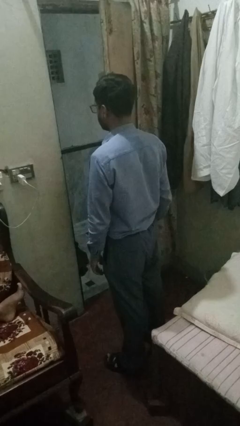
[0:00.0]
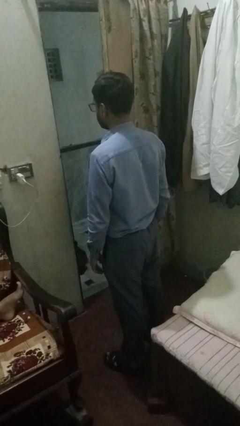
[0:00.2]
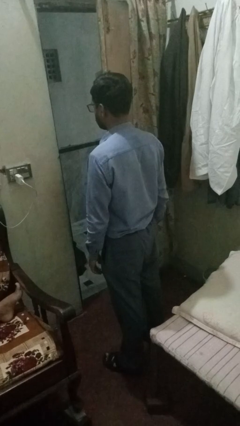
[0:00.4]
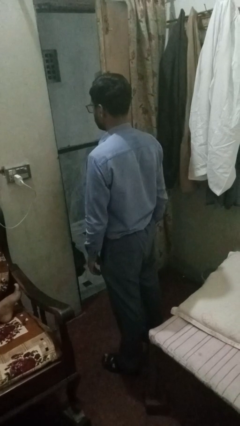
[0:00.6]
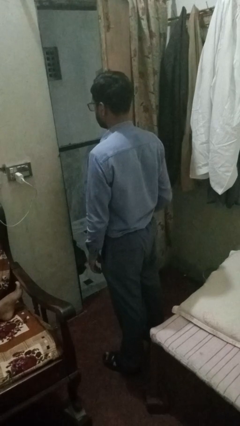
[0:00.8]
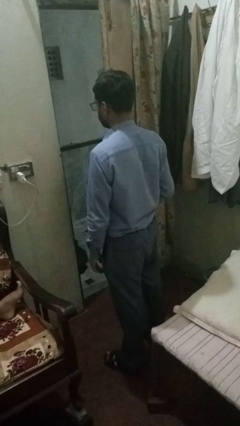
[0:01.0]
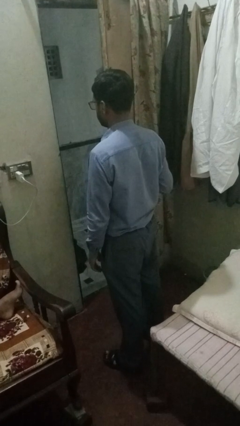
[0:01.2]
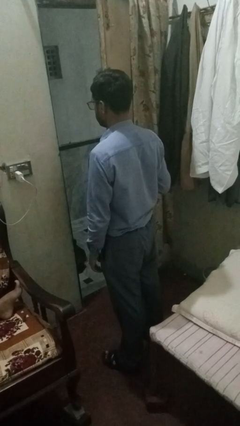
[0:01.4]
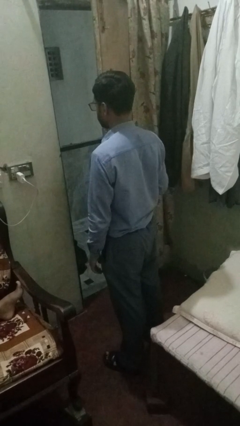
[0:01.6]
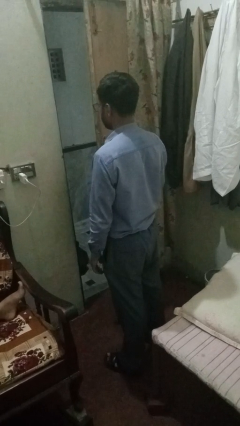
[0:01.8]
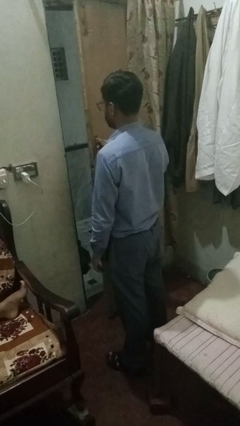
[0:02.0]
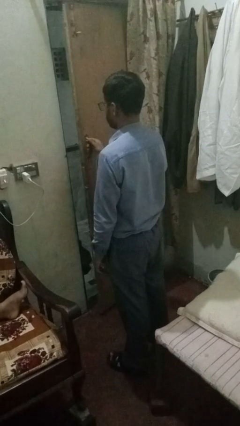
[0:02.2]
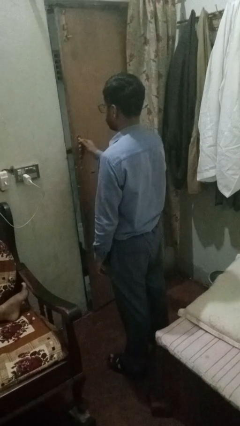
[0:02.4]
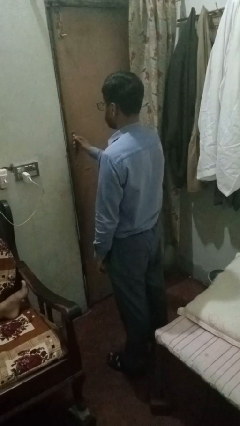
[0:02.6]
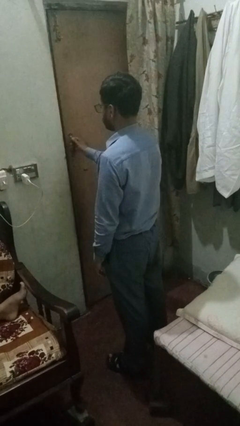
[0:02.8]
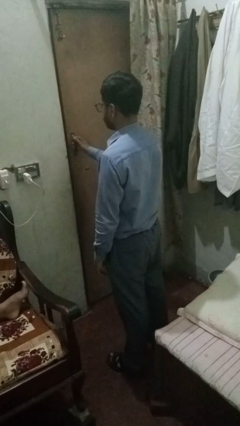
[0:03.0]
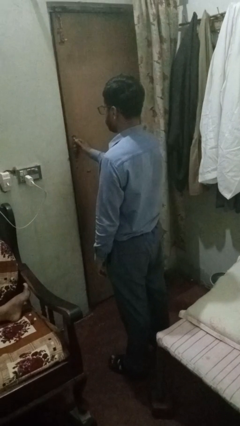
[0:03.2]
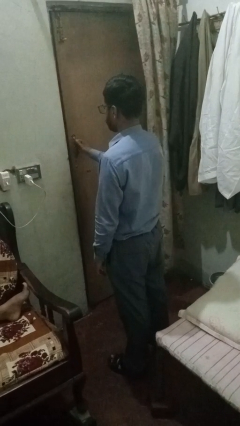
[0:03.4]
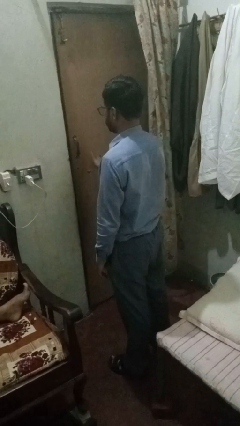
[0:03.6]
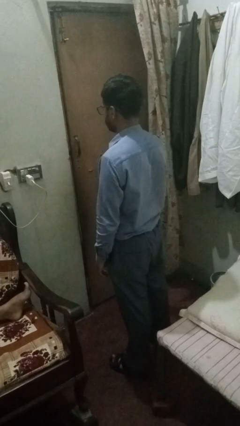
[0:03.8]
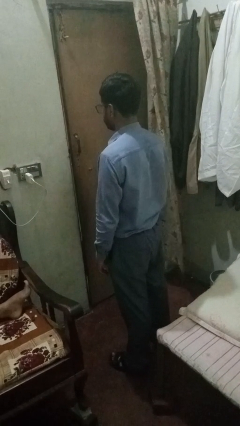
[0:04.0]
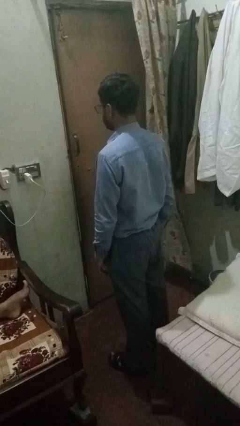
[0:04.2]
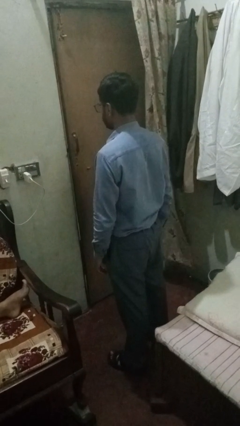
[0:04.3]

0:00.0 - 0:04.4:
person closes sliding door

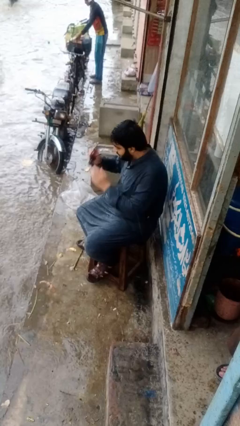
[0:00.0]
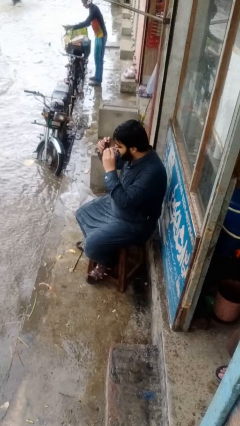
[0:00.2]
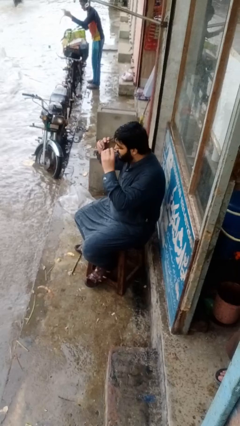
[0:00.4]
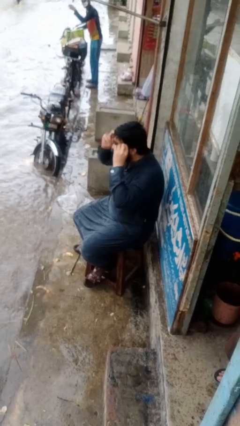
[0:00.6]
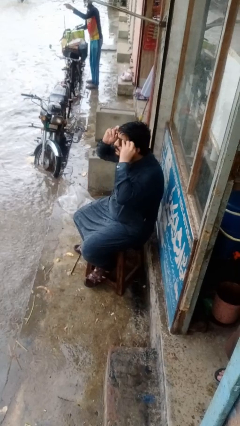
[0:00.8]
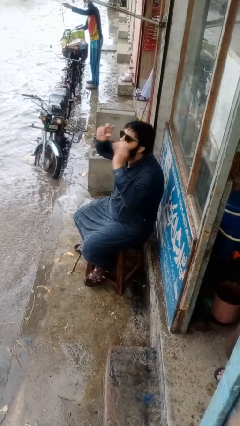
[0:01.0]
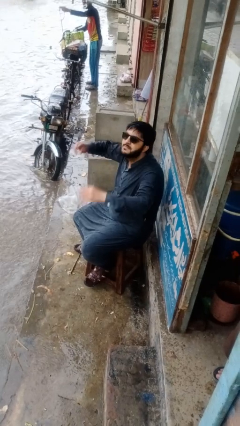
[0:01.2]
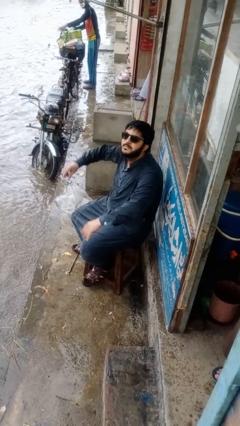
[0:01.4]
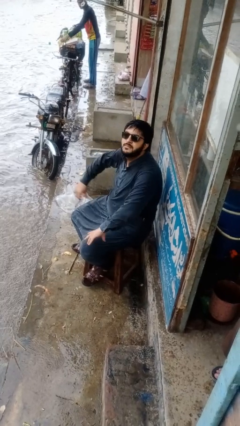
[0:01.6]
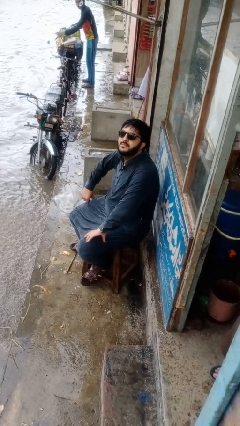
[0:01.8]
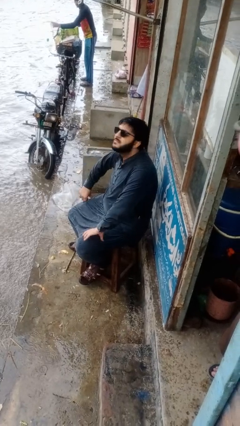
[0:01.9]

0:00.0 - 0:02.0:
person puts on glasses

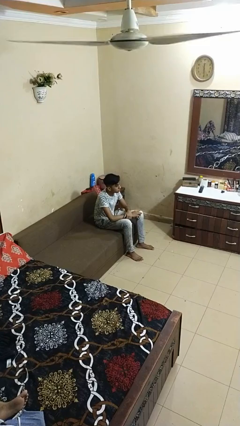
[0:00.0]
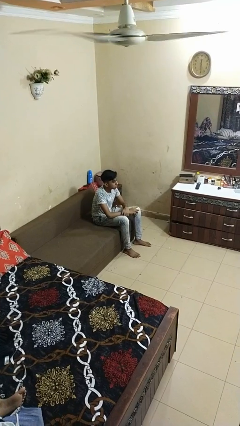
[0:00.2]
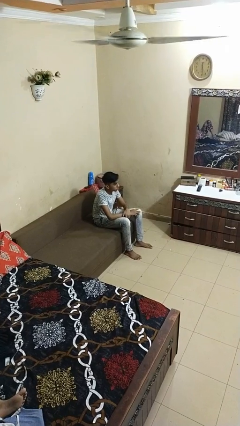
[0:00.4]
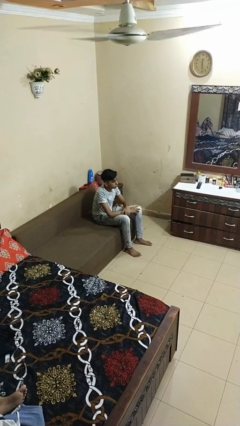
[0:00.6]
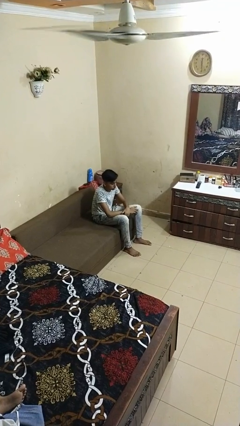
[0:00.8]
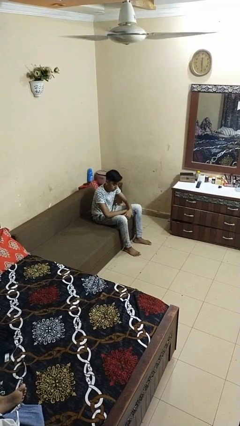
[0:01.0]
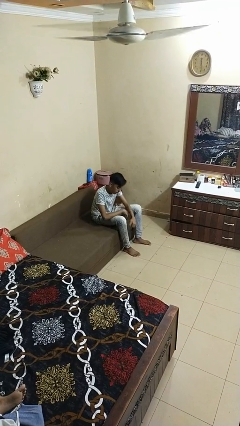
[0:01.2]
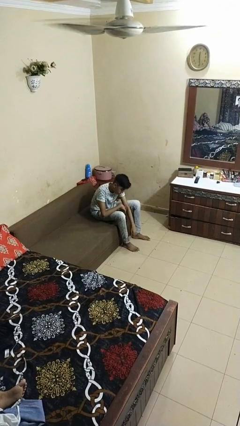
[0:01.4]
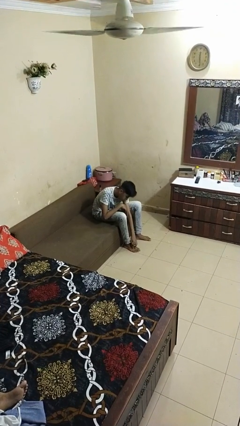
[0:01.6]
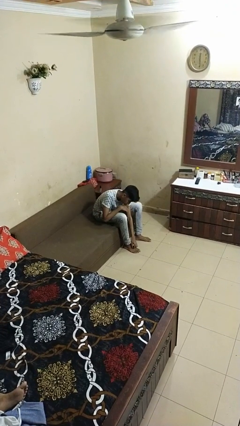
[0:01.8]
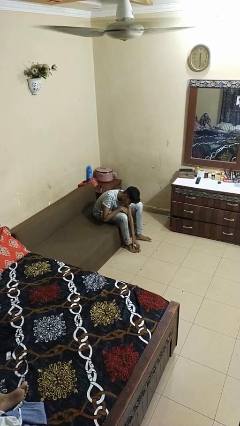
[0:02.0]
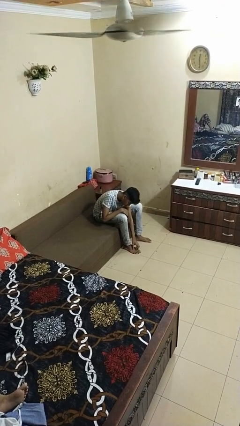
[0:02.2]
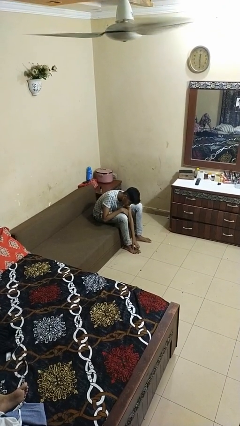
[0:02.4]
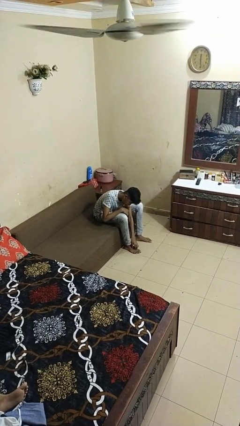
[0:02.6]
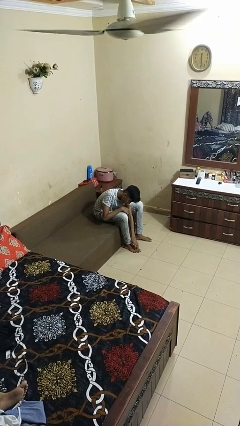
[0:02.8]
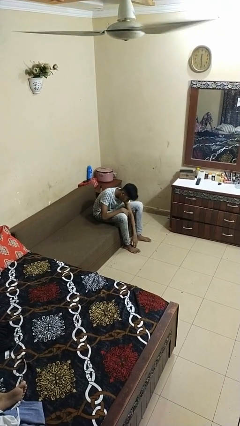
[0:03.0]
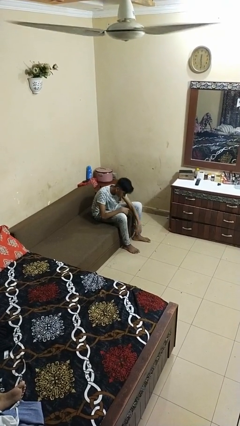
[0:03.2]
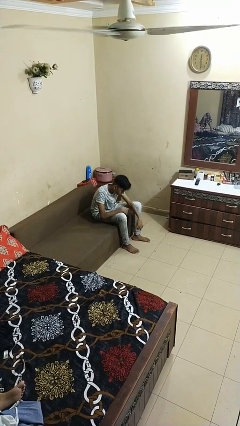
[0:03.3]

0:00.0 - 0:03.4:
person rubs foot

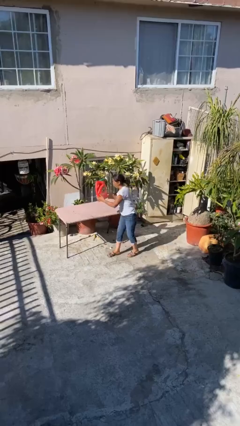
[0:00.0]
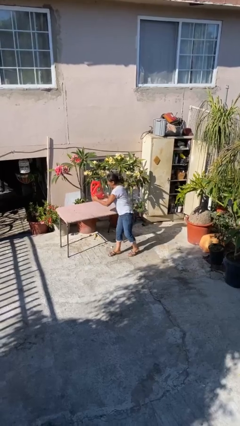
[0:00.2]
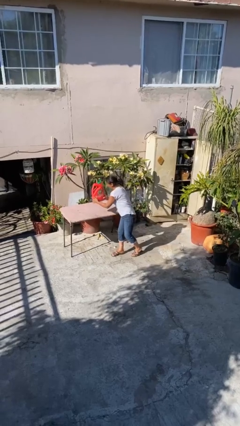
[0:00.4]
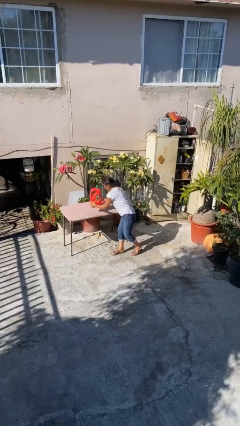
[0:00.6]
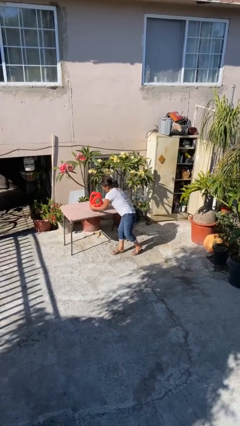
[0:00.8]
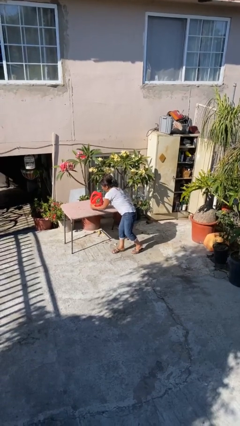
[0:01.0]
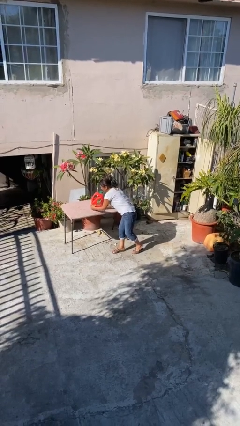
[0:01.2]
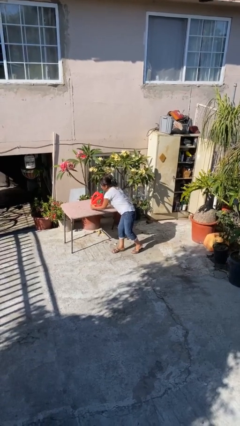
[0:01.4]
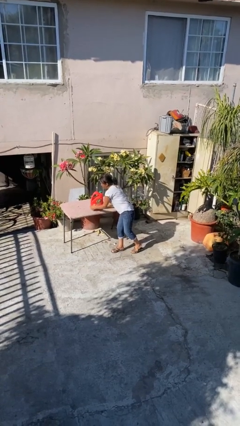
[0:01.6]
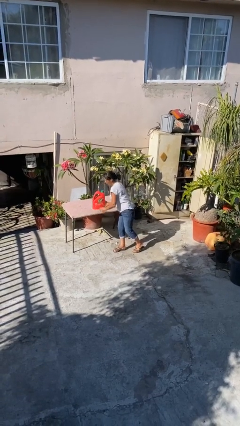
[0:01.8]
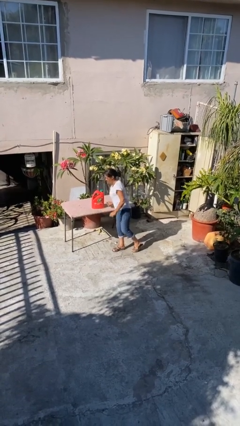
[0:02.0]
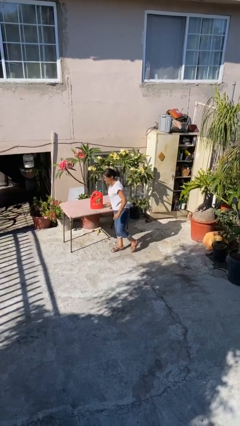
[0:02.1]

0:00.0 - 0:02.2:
person puts down object on table

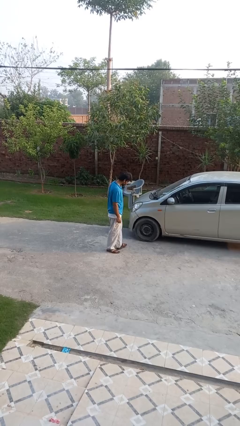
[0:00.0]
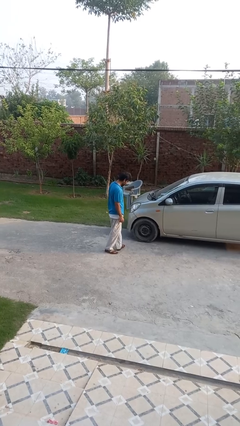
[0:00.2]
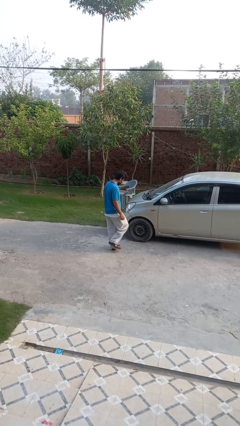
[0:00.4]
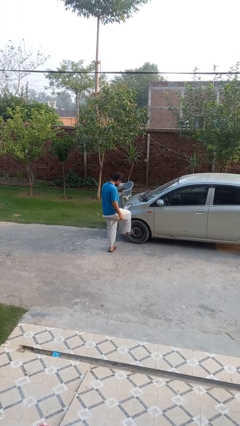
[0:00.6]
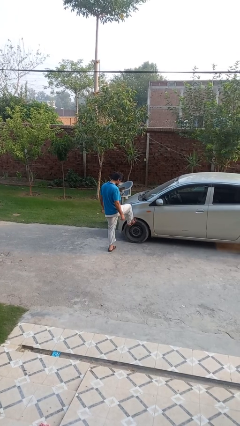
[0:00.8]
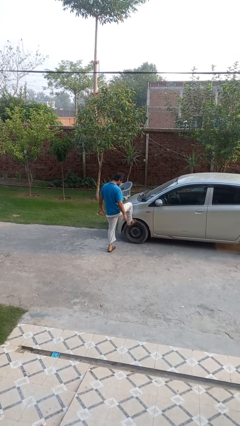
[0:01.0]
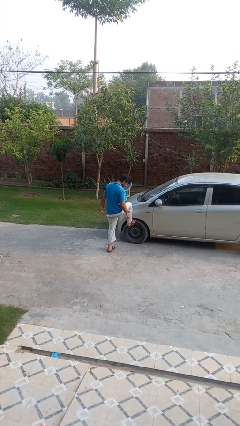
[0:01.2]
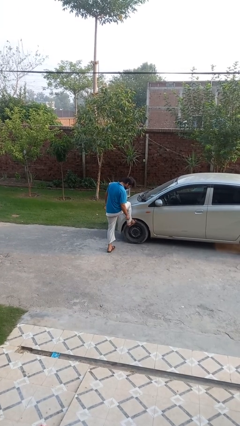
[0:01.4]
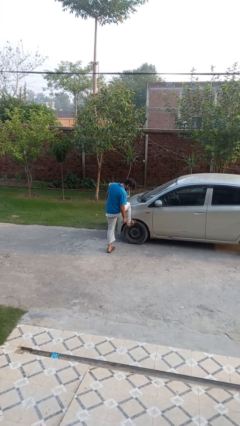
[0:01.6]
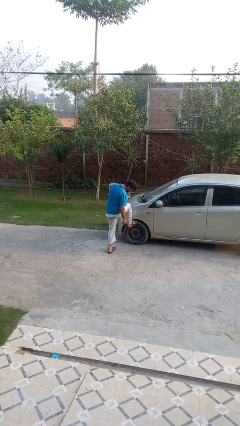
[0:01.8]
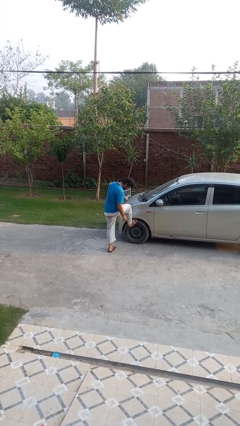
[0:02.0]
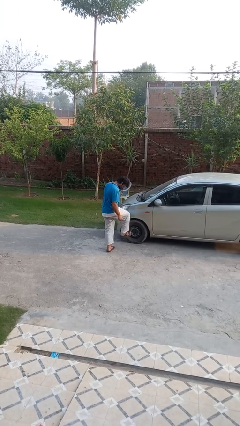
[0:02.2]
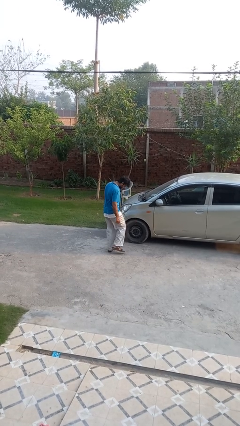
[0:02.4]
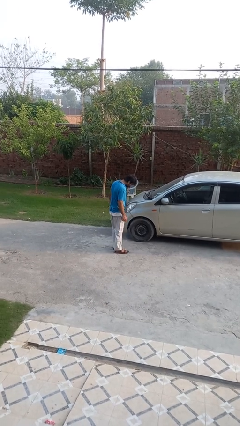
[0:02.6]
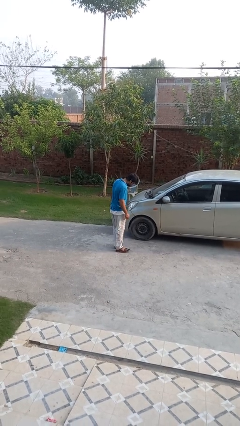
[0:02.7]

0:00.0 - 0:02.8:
person kicks car tires

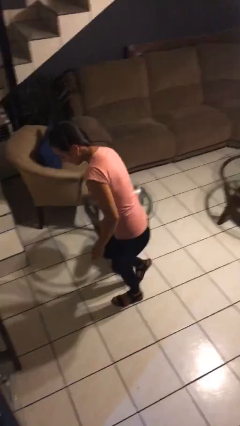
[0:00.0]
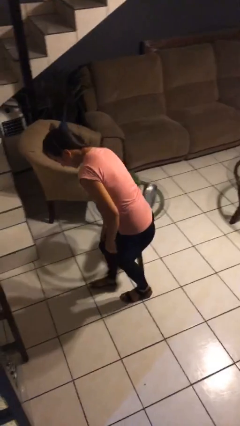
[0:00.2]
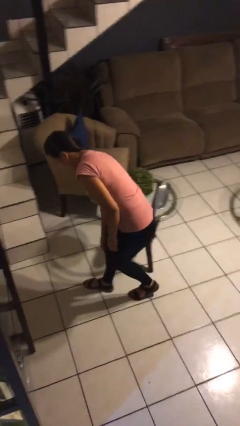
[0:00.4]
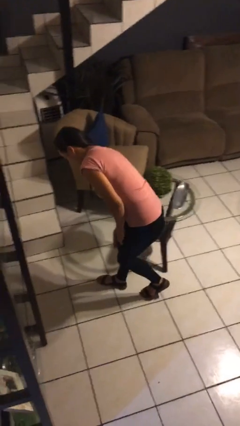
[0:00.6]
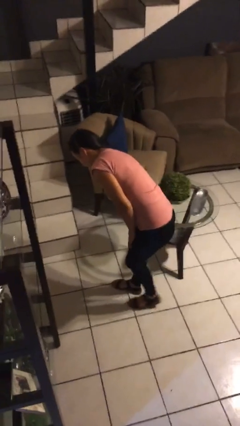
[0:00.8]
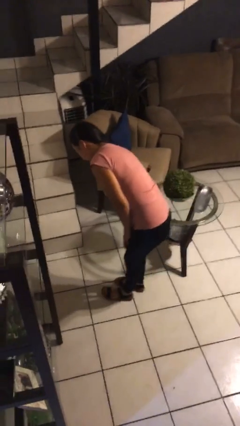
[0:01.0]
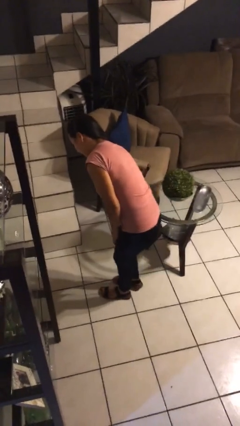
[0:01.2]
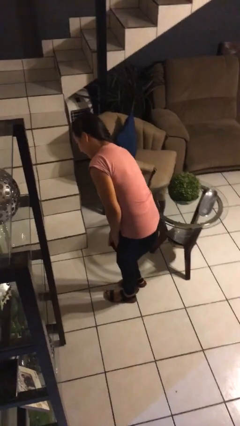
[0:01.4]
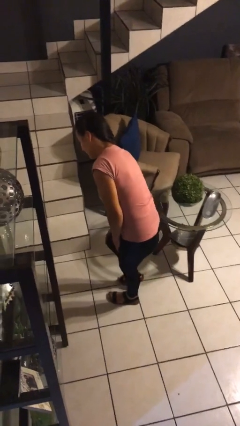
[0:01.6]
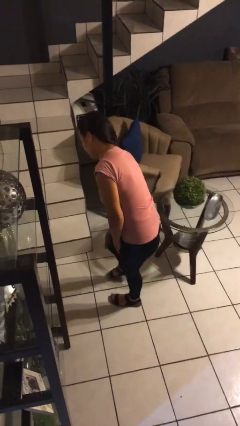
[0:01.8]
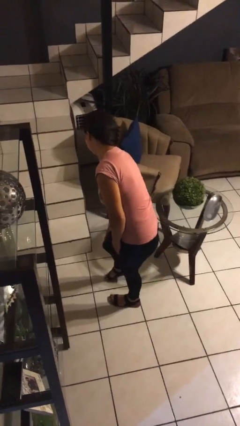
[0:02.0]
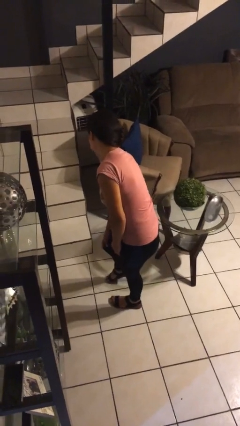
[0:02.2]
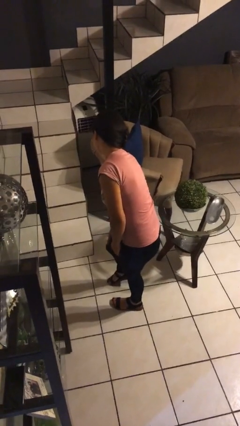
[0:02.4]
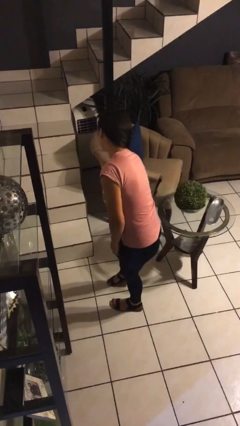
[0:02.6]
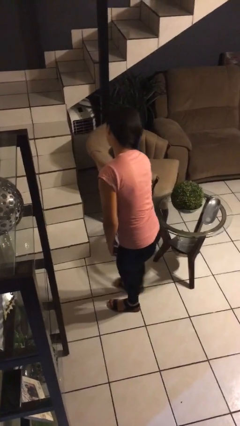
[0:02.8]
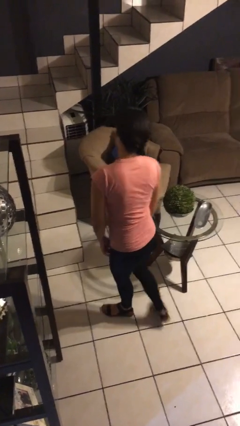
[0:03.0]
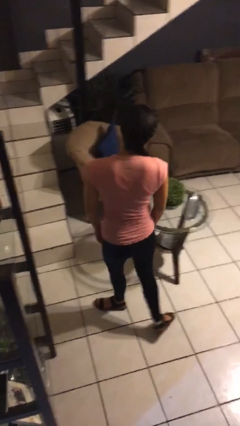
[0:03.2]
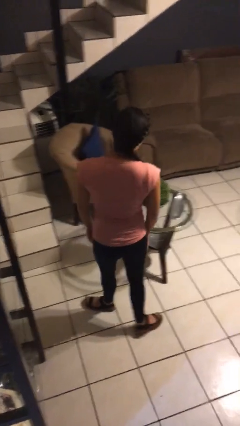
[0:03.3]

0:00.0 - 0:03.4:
person bumps into table
